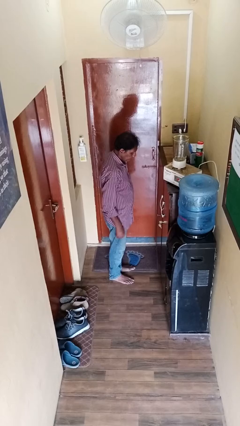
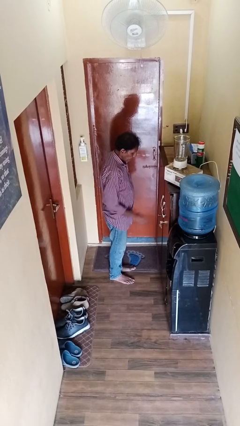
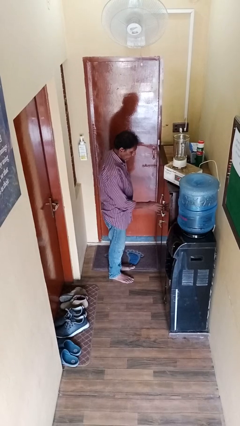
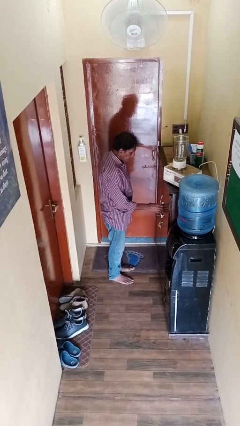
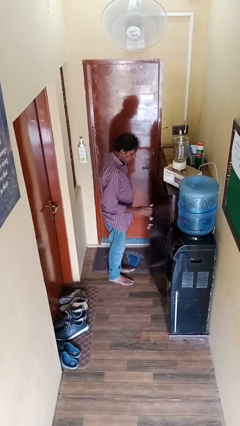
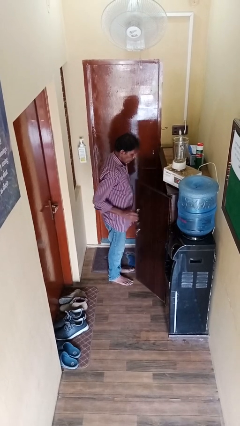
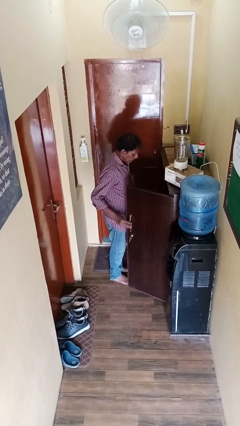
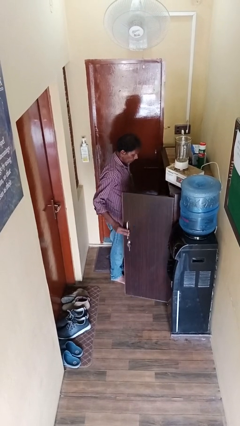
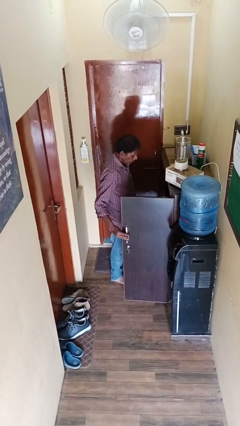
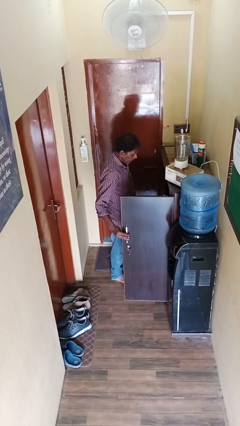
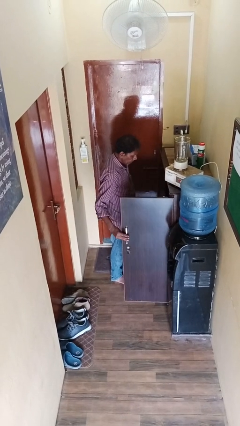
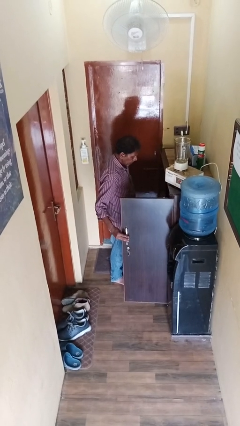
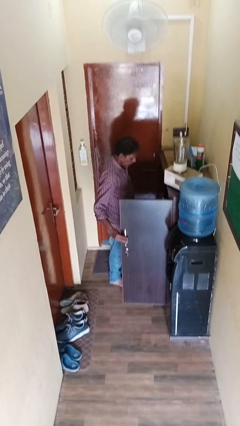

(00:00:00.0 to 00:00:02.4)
person opens cabinet

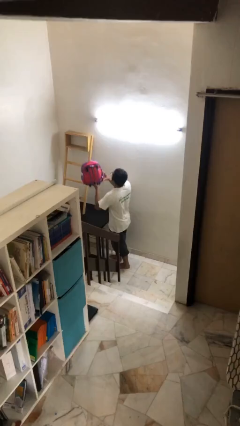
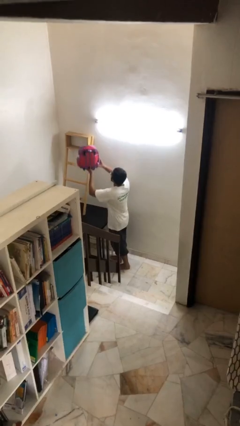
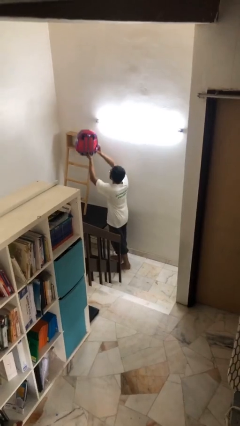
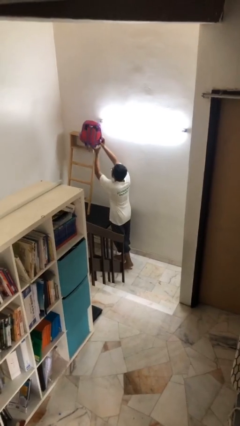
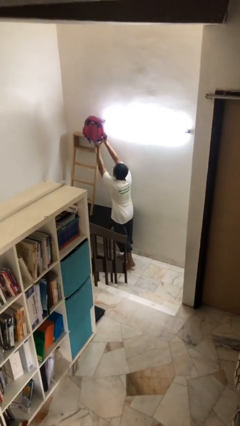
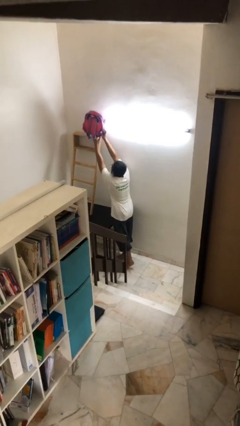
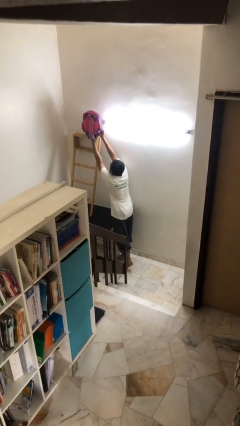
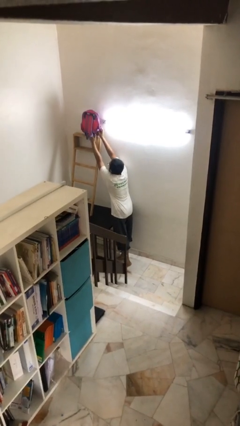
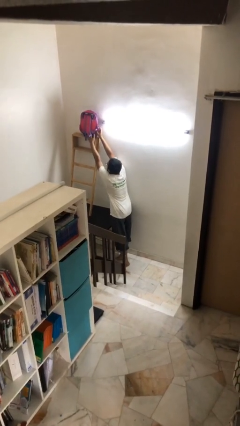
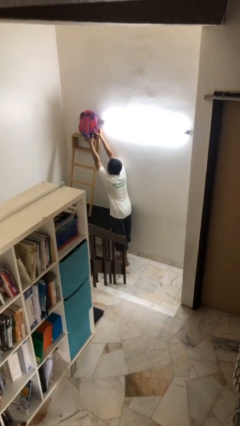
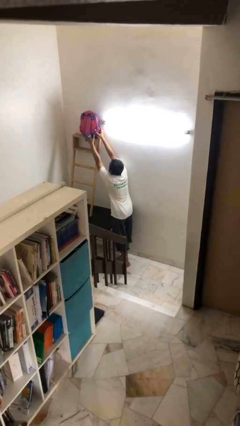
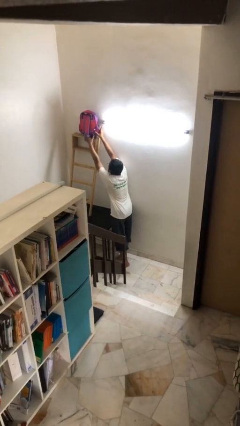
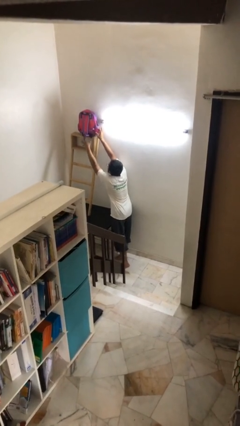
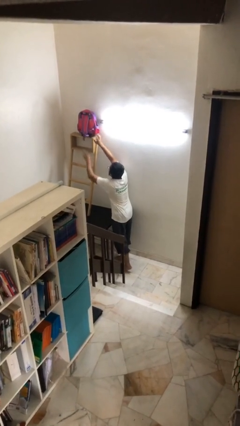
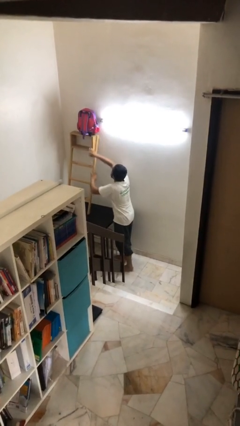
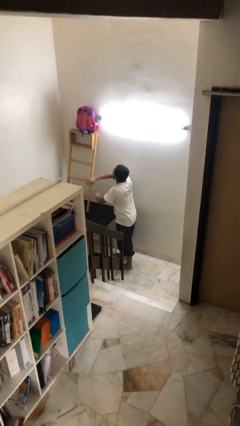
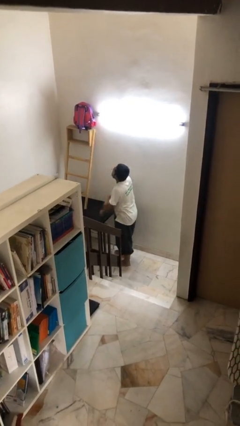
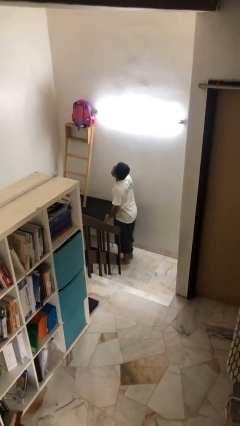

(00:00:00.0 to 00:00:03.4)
person puts down object on shelf

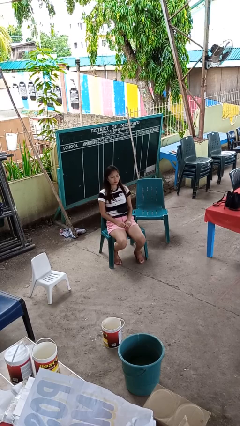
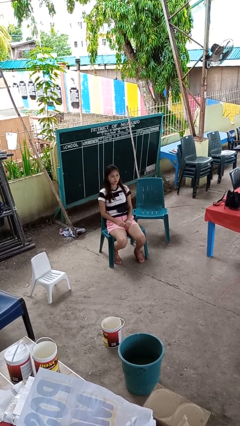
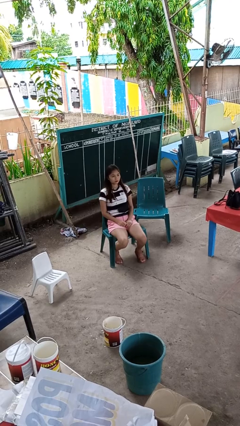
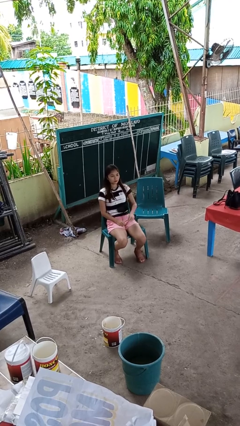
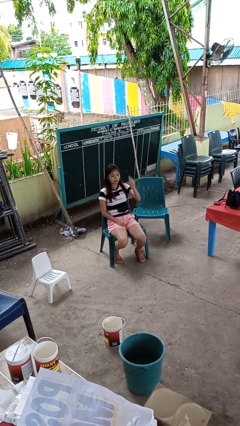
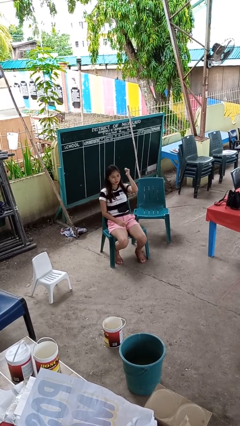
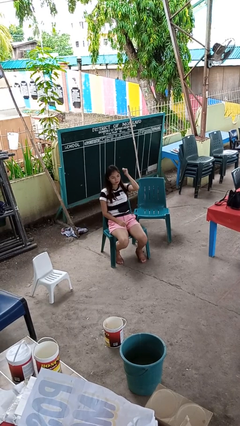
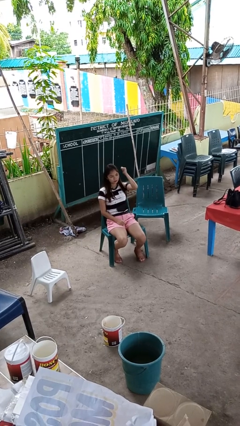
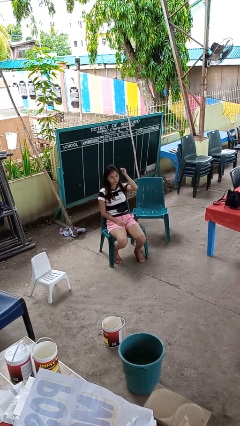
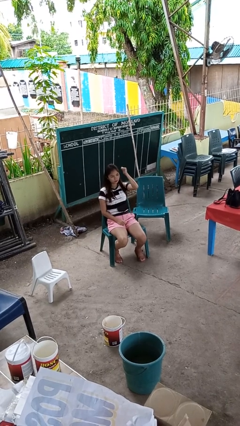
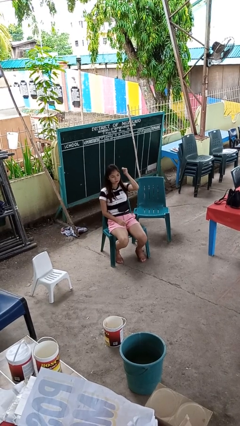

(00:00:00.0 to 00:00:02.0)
person gestures behind me

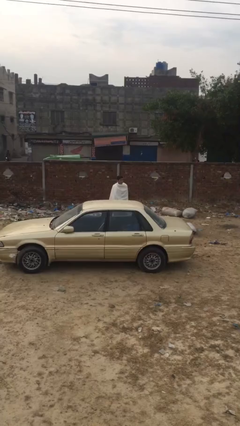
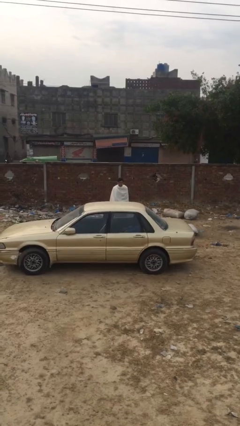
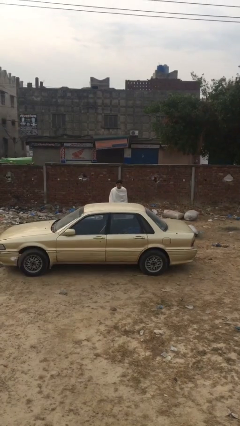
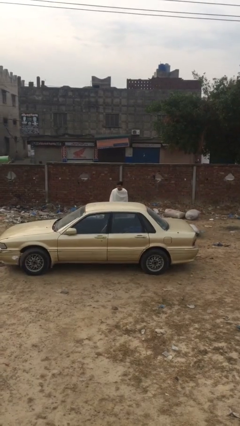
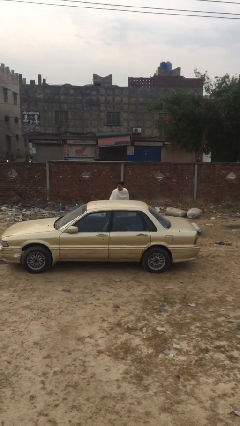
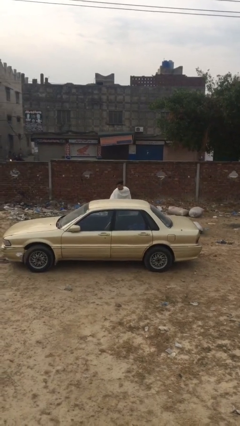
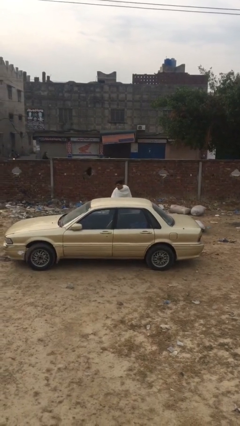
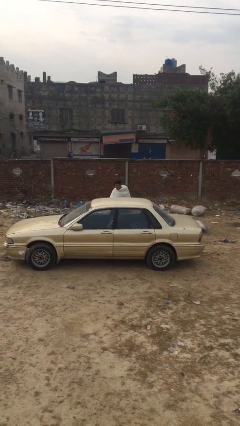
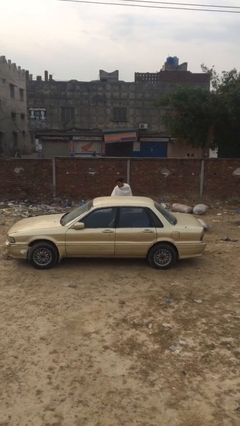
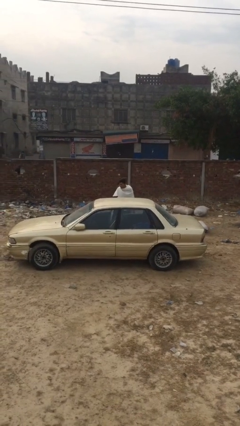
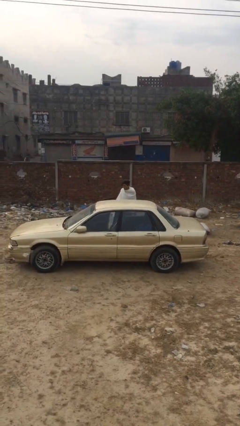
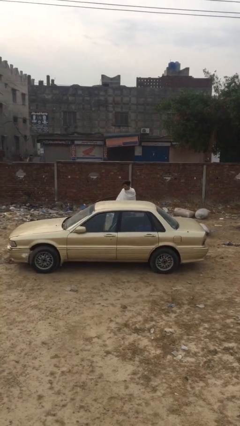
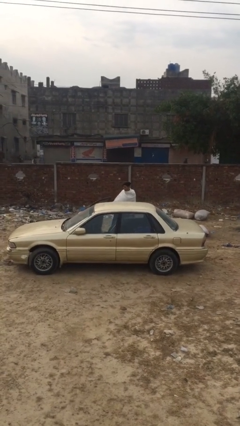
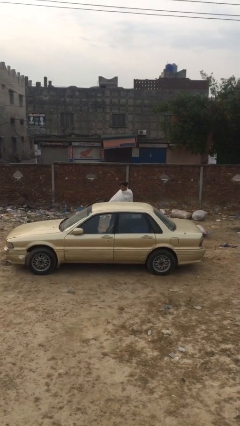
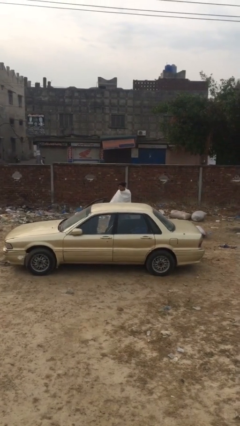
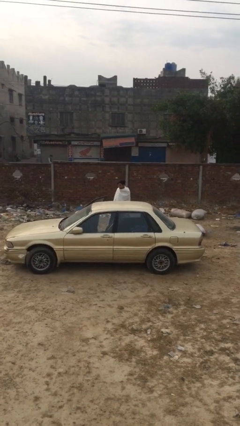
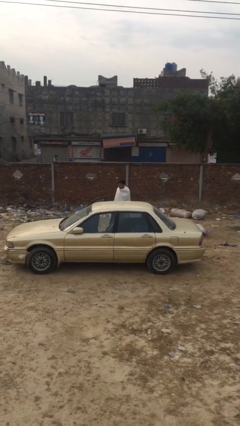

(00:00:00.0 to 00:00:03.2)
person opens car door

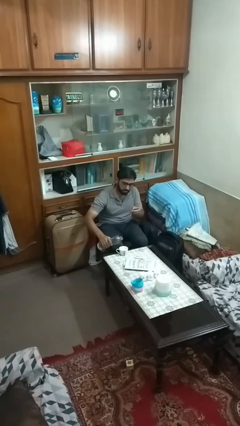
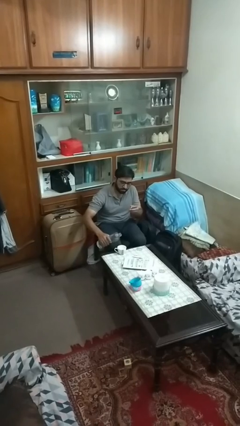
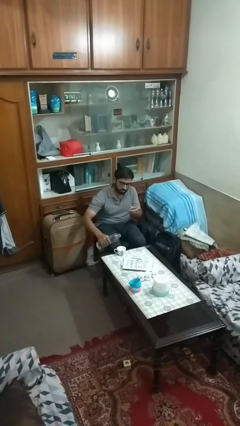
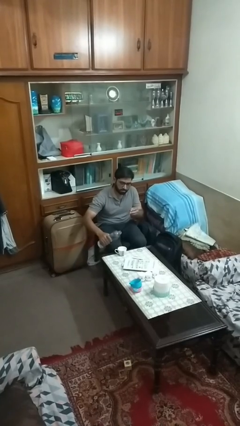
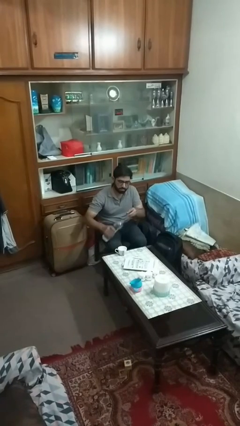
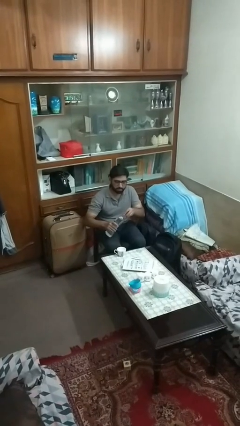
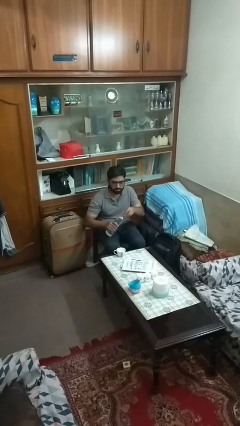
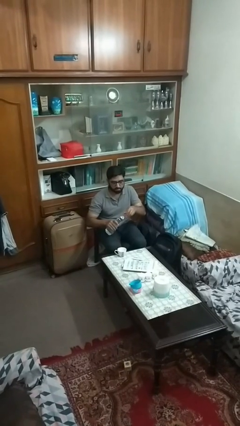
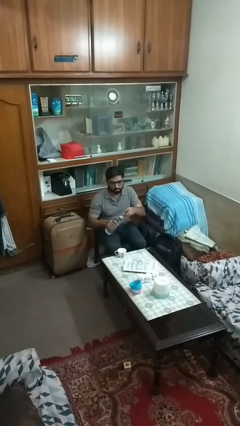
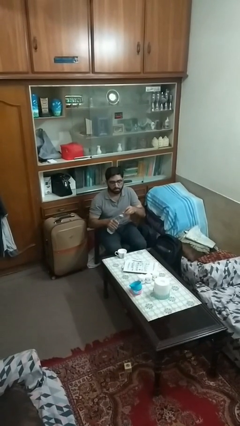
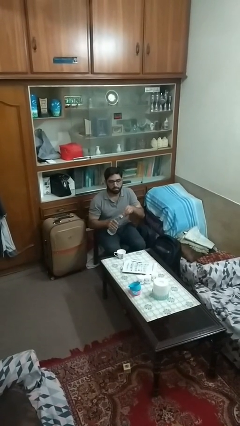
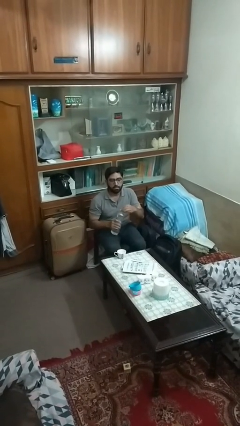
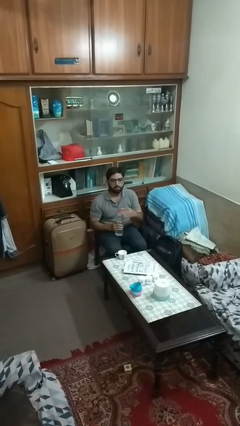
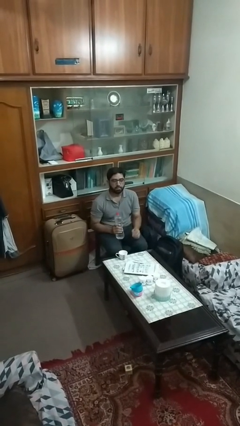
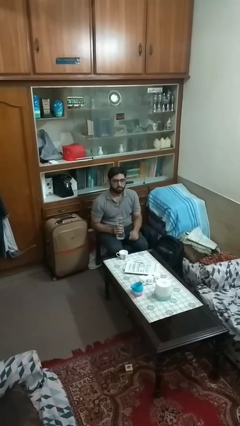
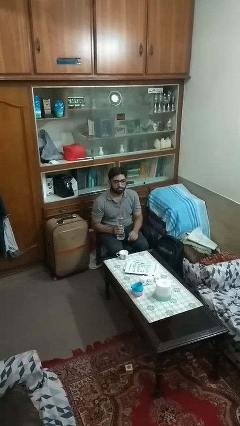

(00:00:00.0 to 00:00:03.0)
person screws lid to bottle

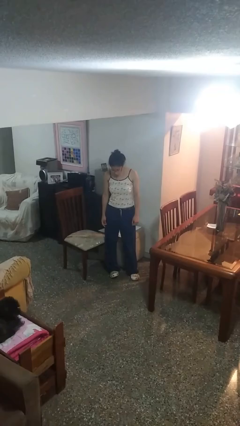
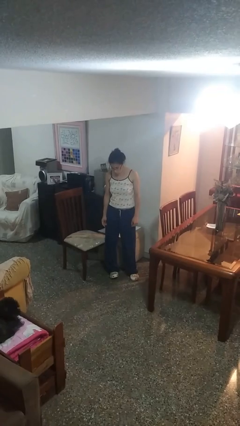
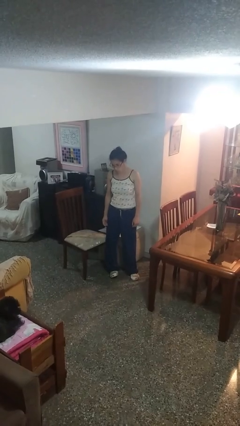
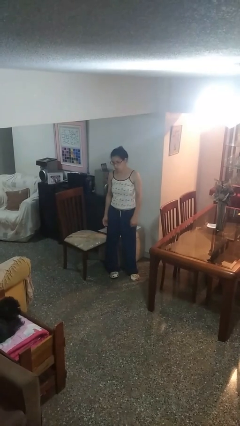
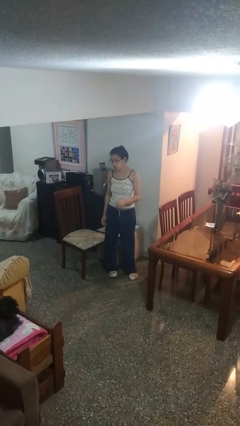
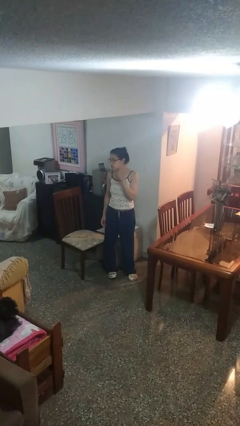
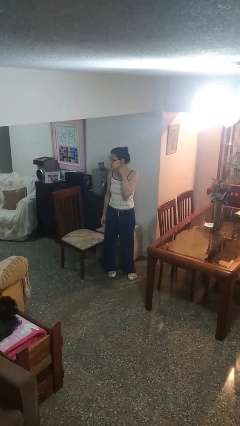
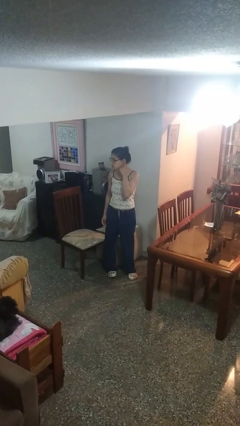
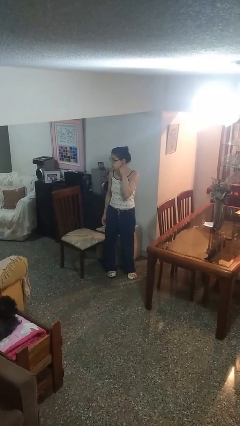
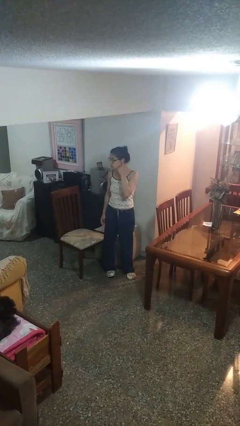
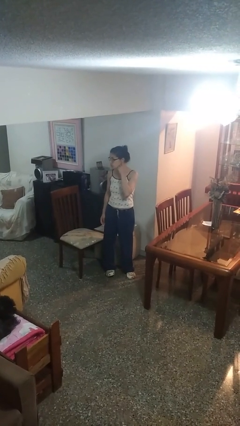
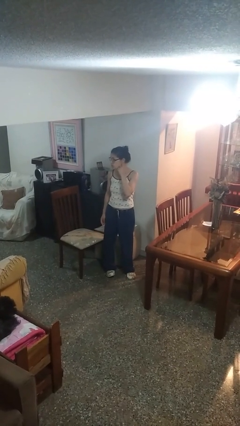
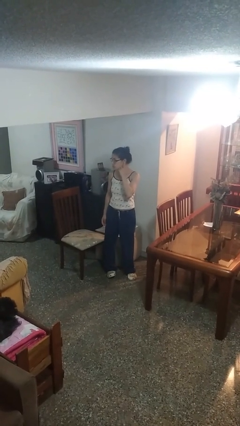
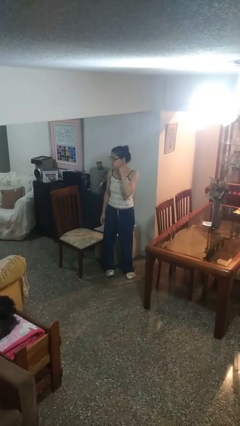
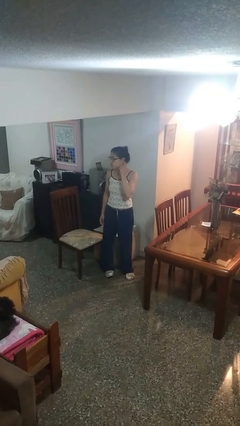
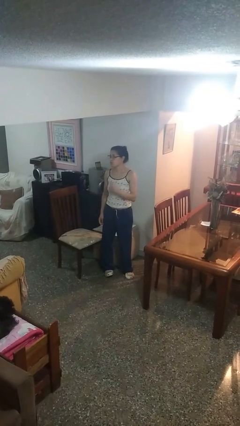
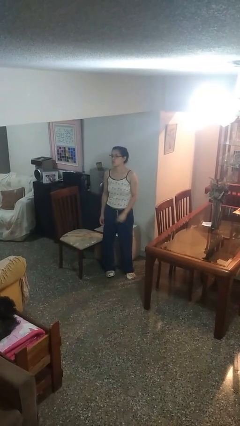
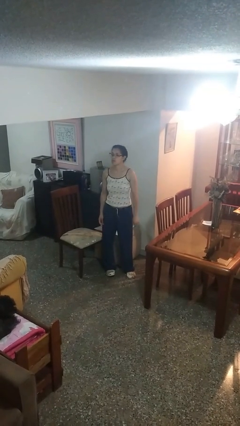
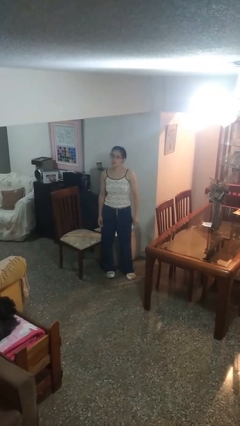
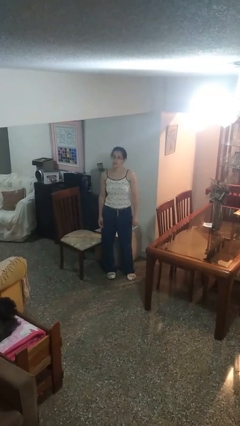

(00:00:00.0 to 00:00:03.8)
person gestures listen closely
